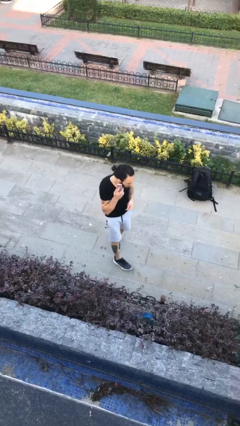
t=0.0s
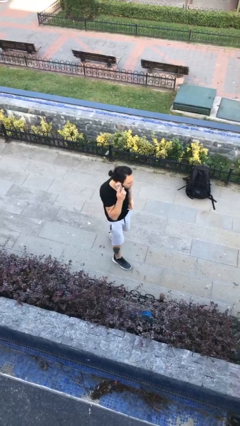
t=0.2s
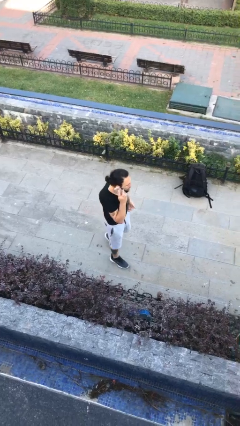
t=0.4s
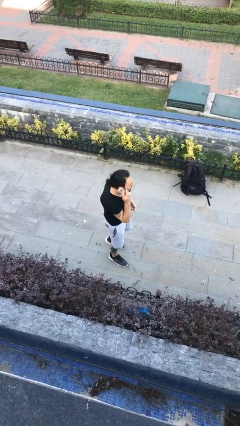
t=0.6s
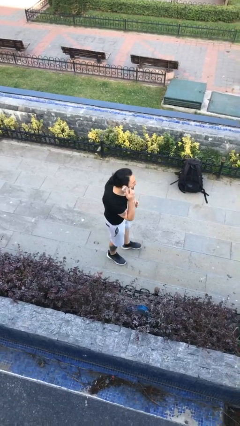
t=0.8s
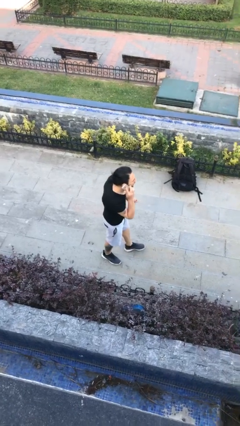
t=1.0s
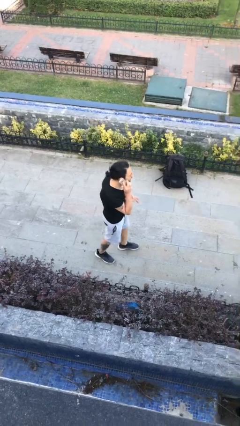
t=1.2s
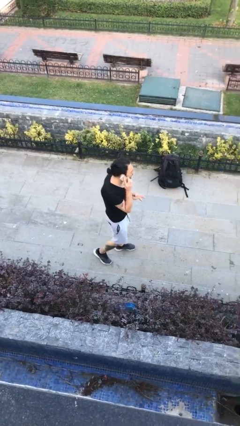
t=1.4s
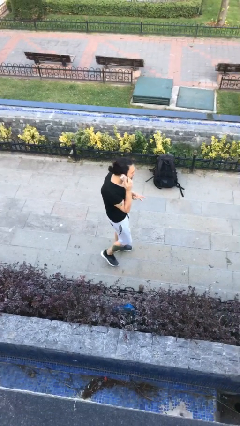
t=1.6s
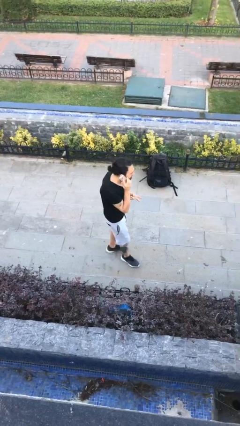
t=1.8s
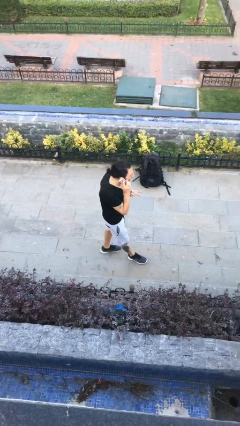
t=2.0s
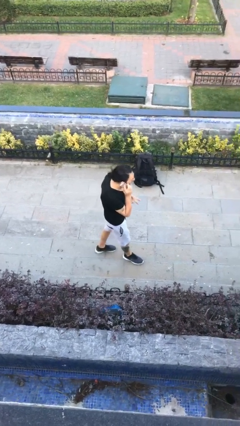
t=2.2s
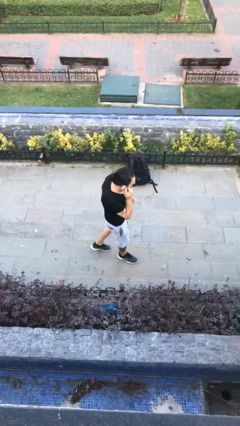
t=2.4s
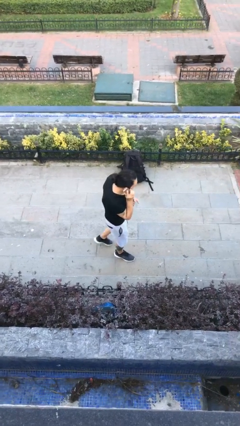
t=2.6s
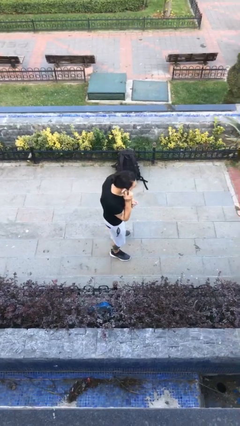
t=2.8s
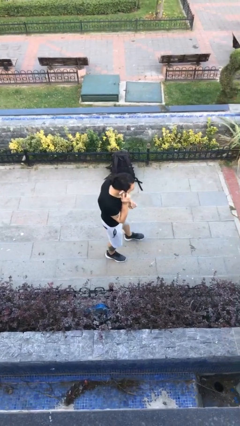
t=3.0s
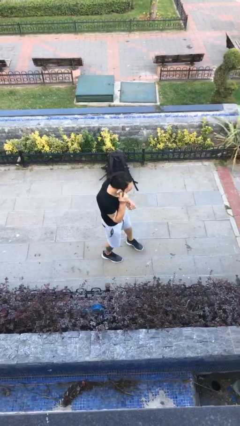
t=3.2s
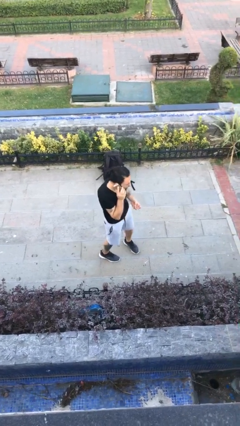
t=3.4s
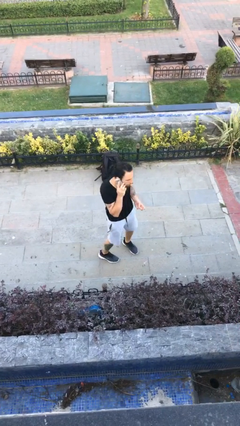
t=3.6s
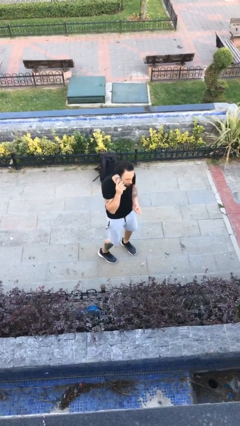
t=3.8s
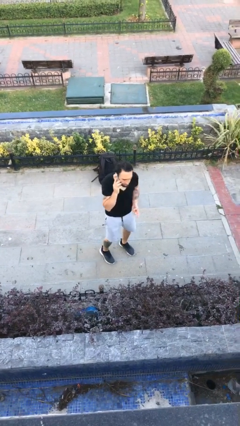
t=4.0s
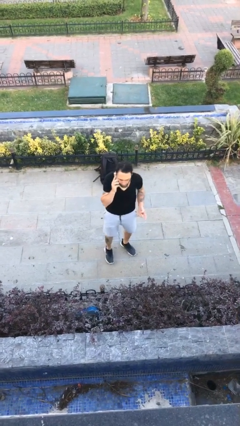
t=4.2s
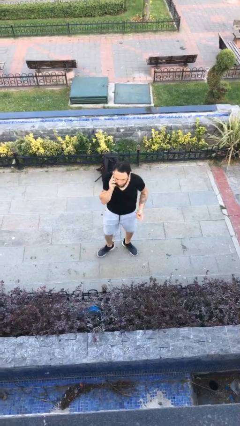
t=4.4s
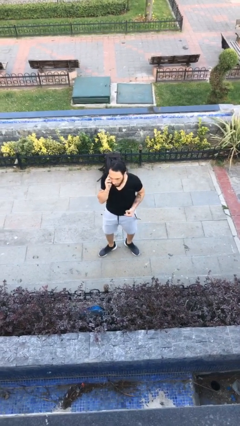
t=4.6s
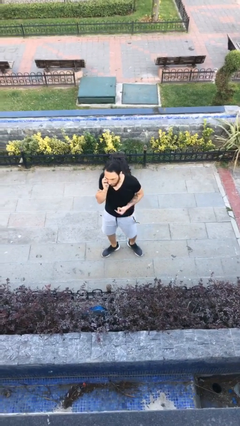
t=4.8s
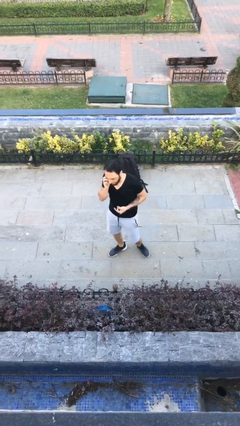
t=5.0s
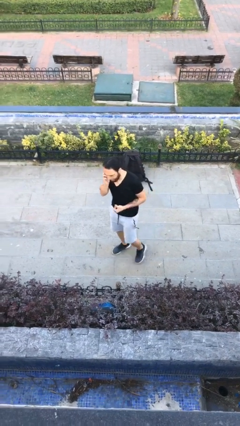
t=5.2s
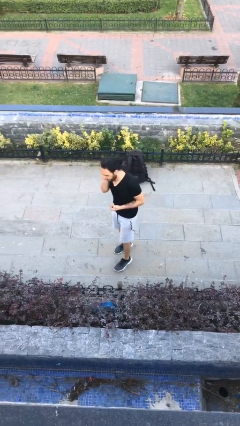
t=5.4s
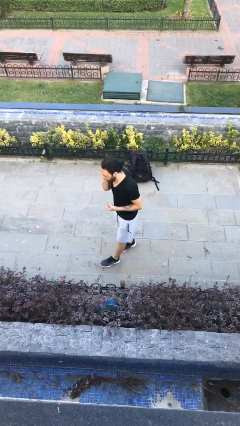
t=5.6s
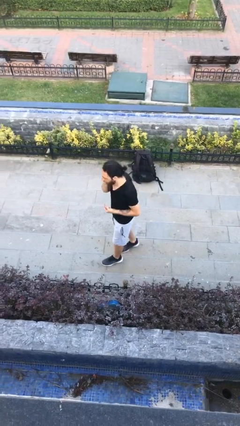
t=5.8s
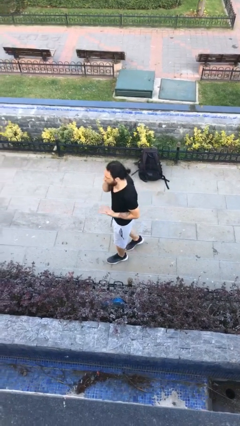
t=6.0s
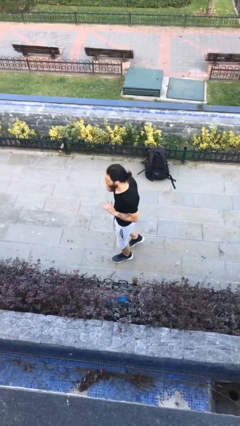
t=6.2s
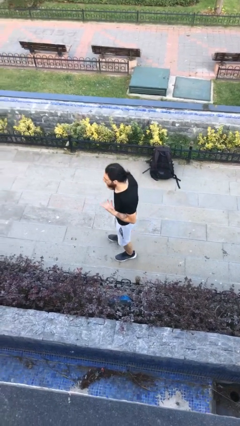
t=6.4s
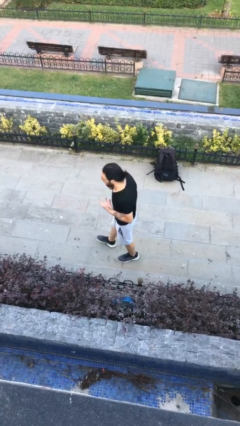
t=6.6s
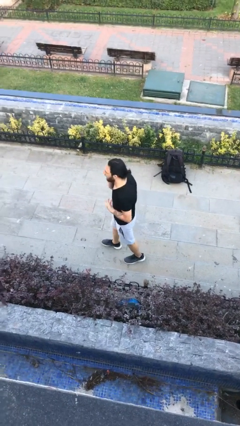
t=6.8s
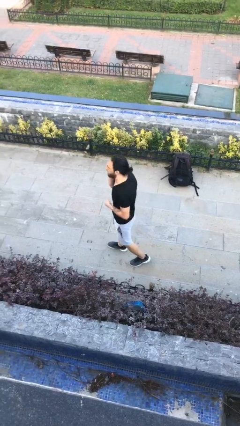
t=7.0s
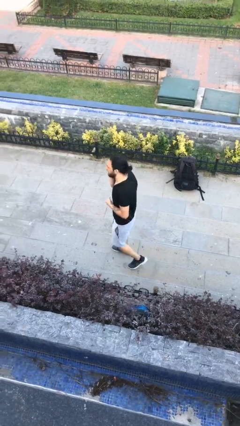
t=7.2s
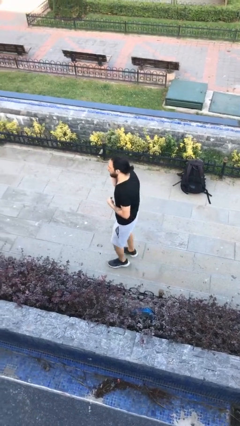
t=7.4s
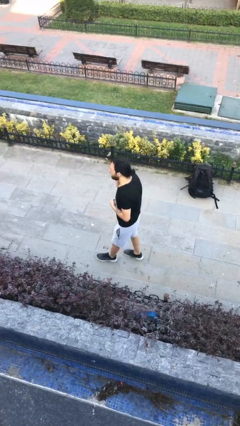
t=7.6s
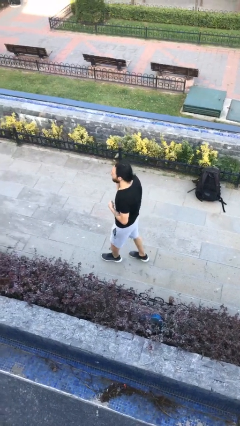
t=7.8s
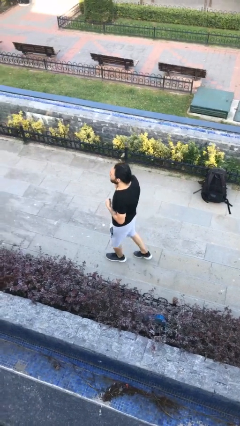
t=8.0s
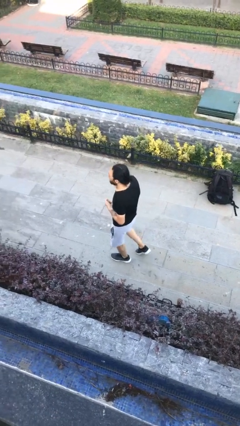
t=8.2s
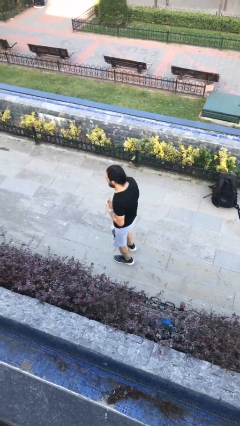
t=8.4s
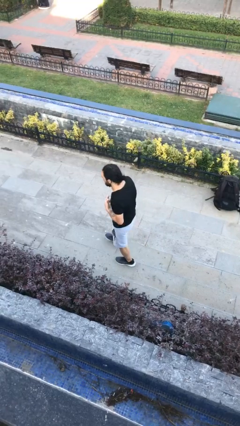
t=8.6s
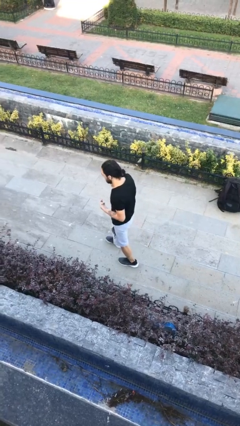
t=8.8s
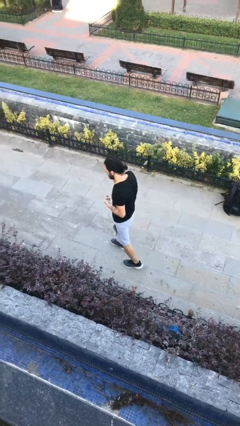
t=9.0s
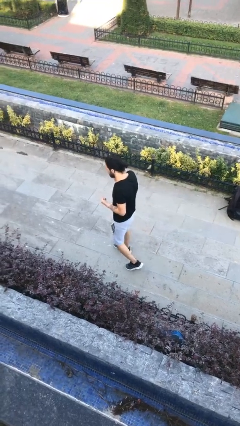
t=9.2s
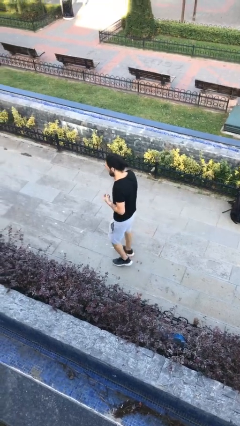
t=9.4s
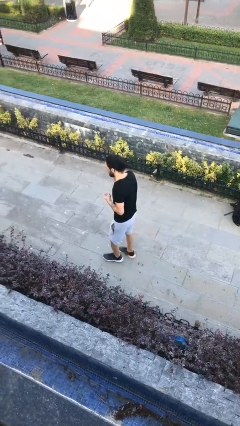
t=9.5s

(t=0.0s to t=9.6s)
person talks on phone

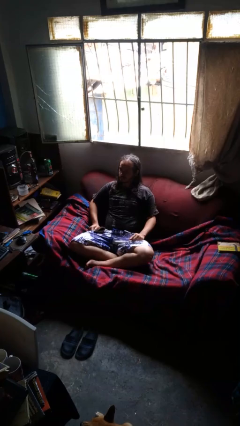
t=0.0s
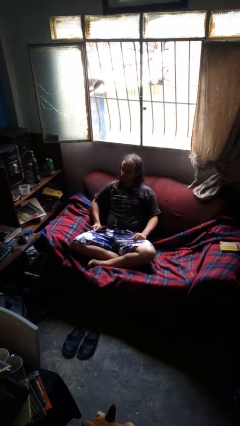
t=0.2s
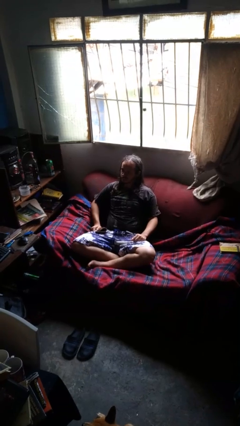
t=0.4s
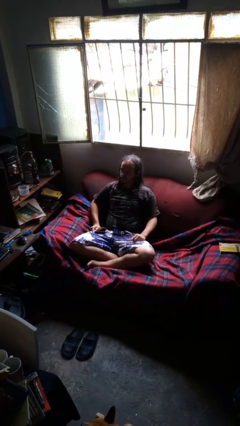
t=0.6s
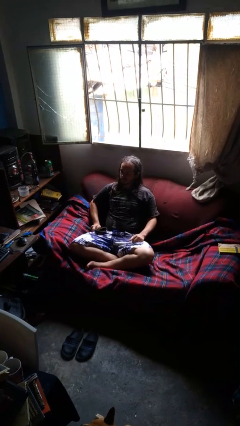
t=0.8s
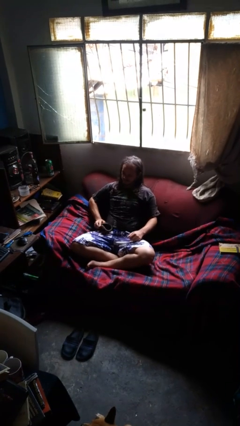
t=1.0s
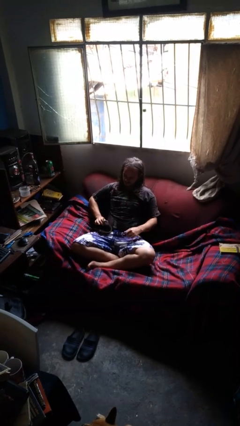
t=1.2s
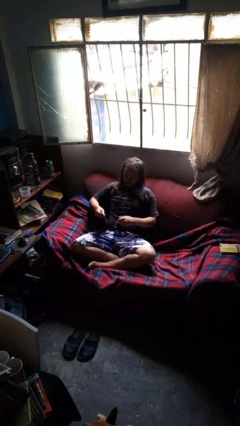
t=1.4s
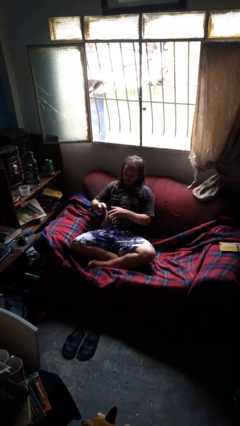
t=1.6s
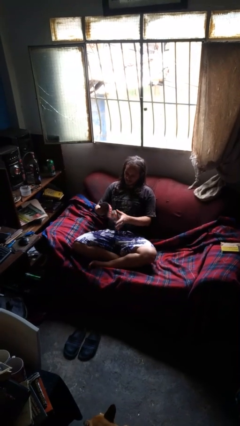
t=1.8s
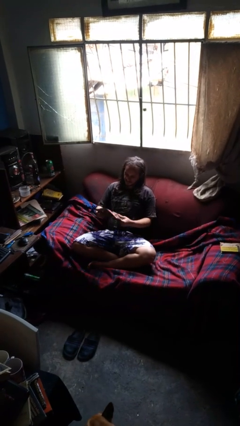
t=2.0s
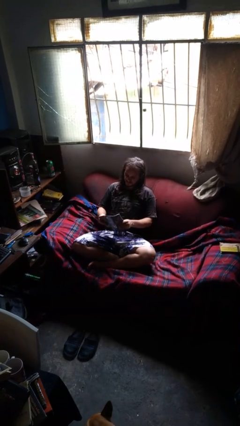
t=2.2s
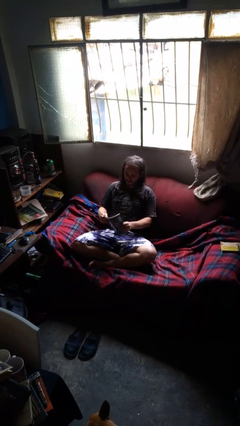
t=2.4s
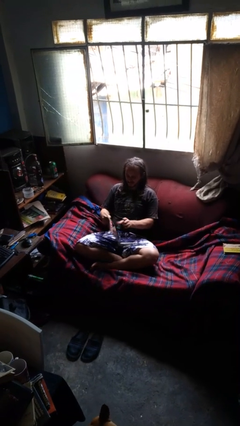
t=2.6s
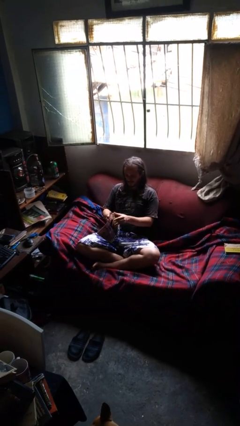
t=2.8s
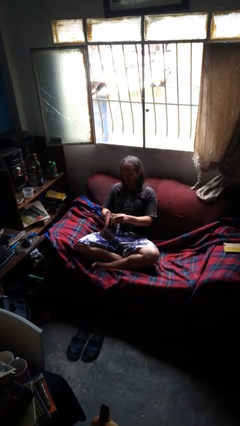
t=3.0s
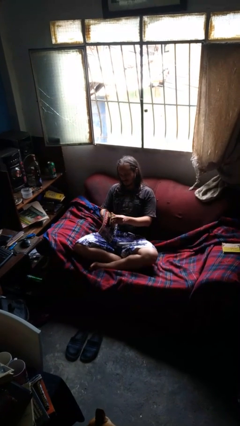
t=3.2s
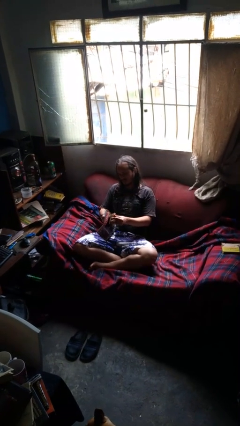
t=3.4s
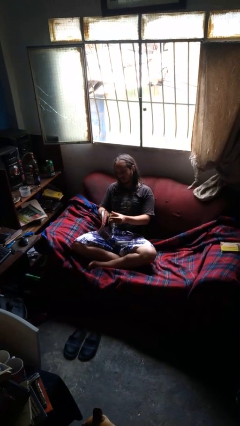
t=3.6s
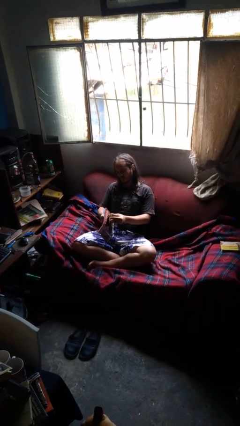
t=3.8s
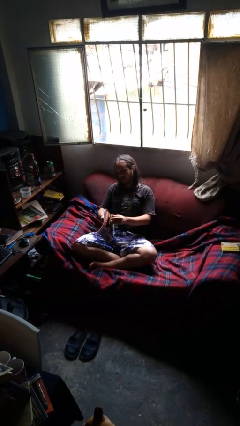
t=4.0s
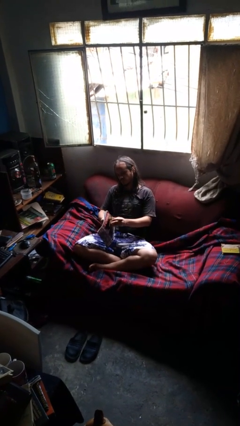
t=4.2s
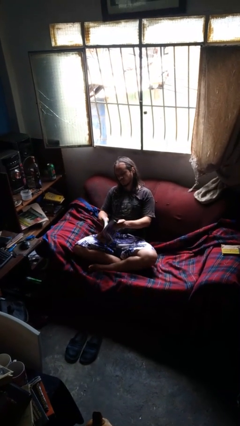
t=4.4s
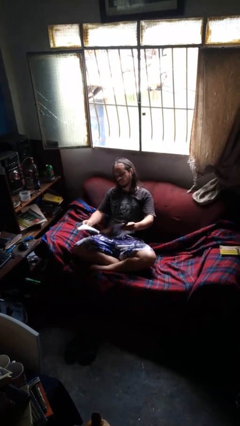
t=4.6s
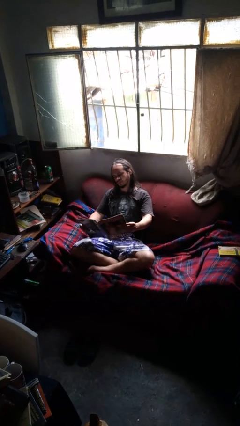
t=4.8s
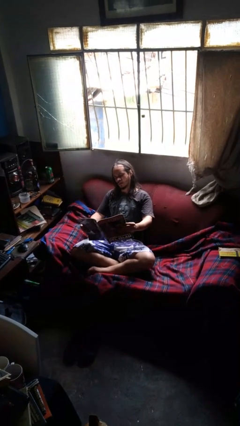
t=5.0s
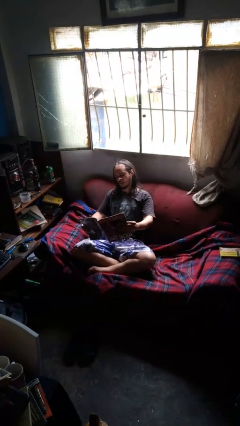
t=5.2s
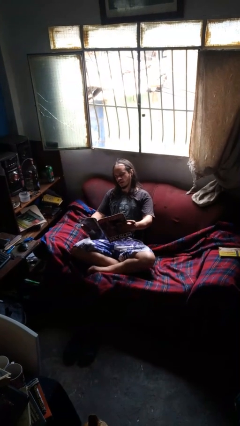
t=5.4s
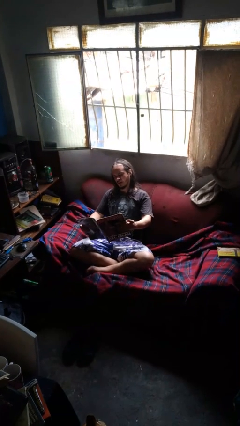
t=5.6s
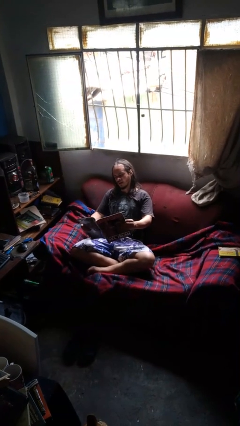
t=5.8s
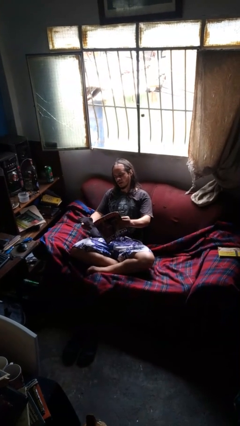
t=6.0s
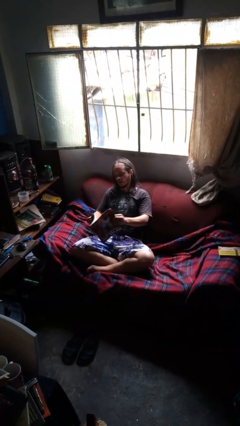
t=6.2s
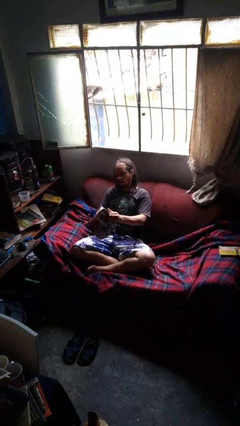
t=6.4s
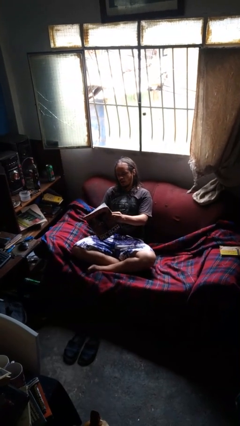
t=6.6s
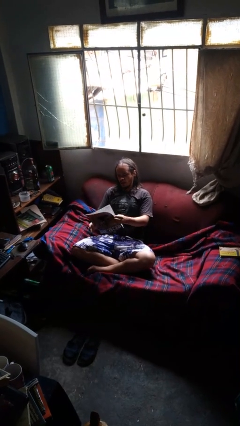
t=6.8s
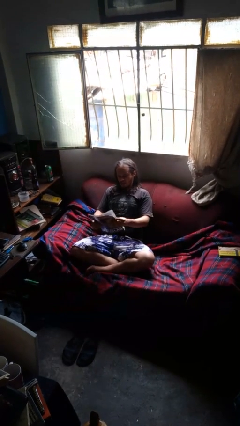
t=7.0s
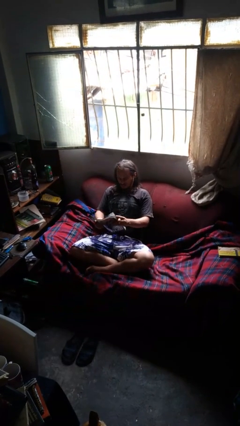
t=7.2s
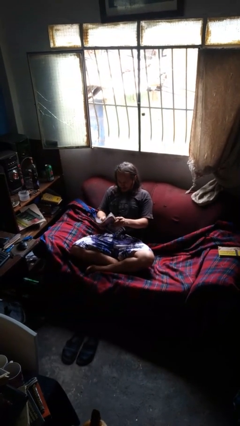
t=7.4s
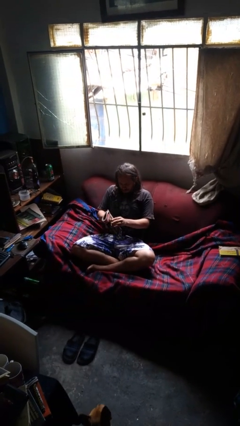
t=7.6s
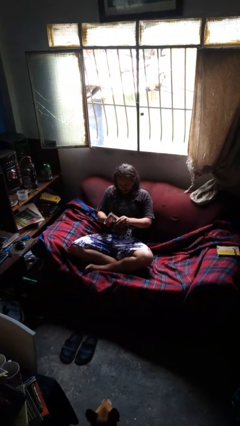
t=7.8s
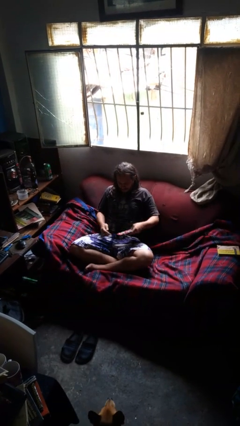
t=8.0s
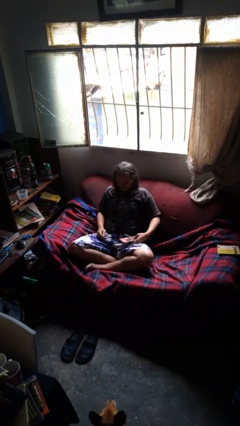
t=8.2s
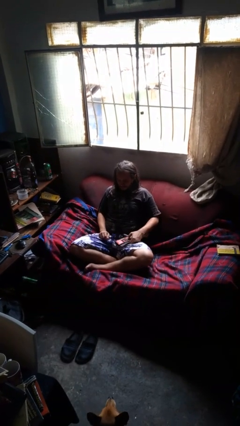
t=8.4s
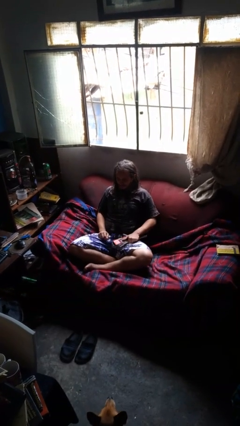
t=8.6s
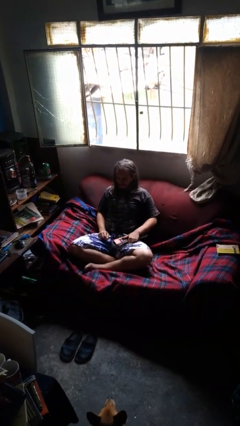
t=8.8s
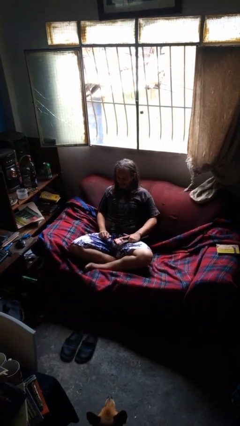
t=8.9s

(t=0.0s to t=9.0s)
person reads magazine
